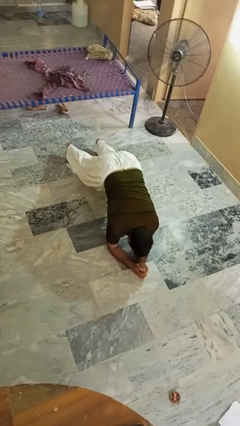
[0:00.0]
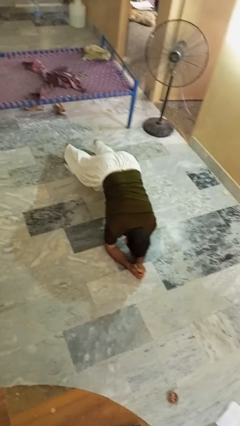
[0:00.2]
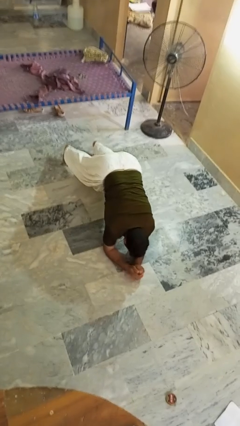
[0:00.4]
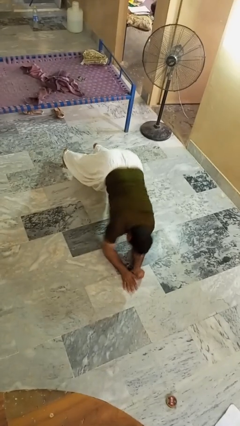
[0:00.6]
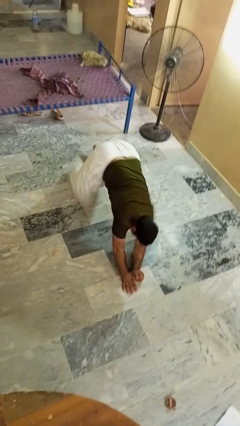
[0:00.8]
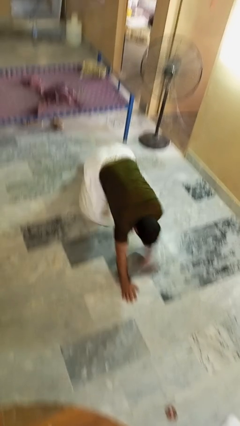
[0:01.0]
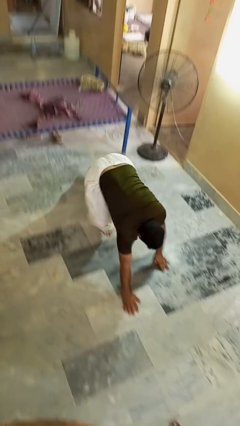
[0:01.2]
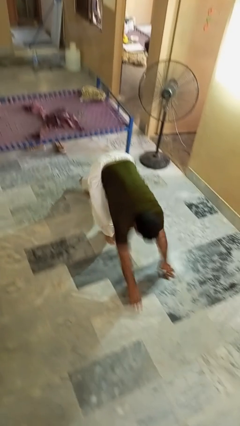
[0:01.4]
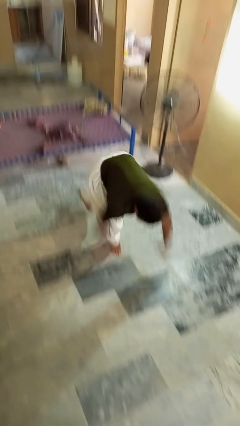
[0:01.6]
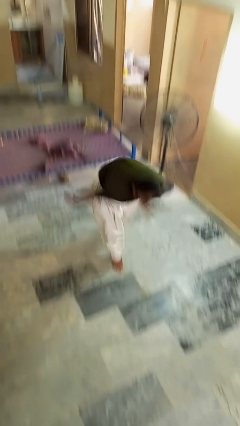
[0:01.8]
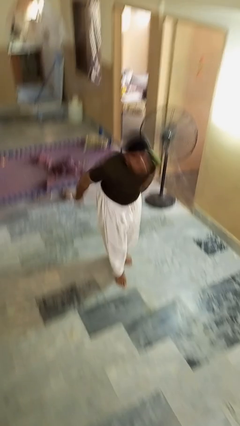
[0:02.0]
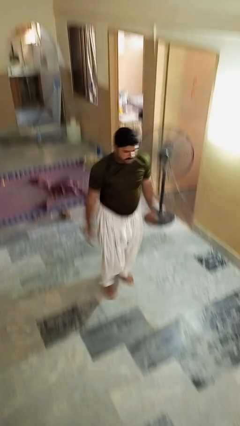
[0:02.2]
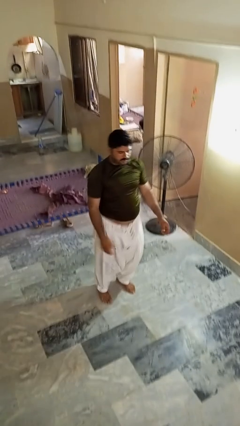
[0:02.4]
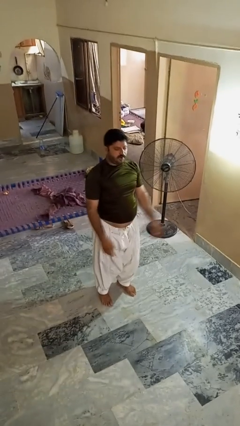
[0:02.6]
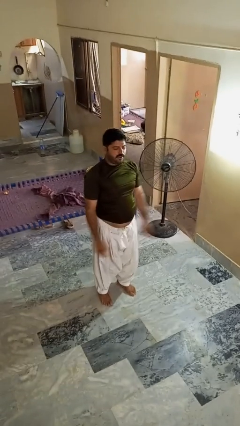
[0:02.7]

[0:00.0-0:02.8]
person stands up from floor

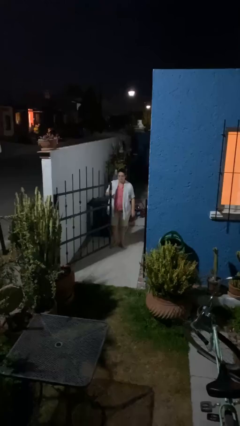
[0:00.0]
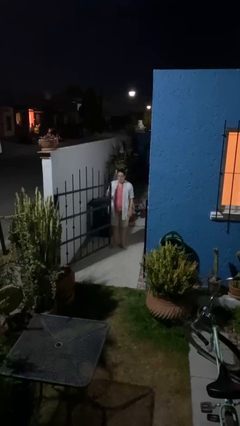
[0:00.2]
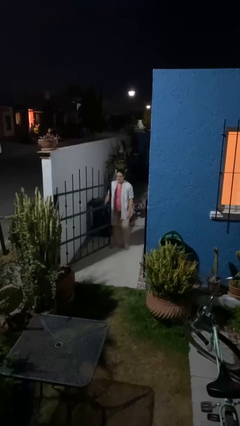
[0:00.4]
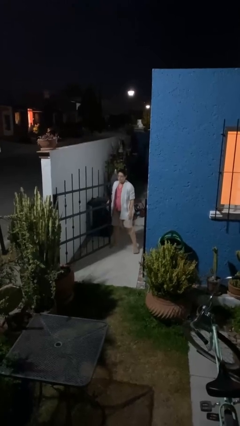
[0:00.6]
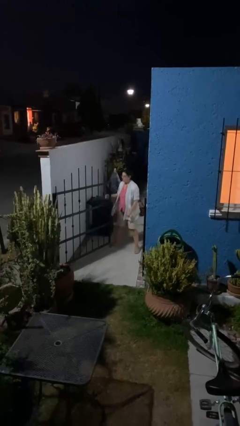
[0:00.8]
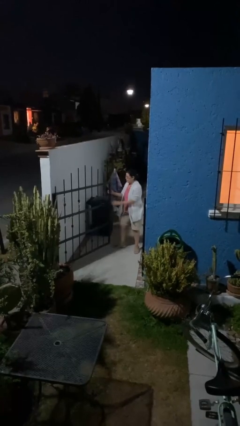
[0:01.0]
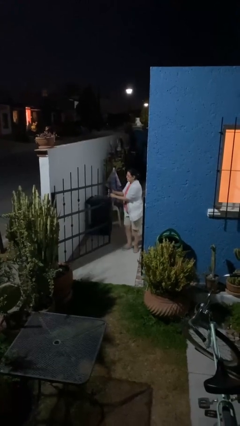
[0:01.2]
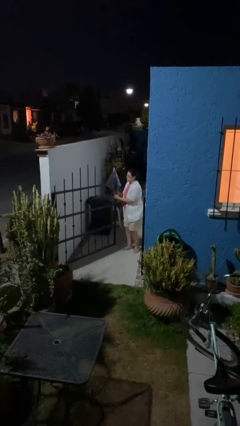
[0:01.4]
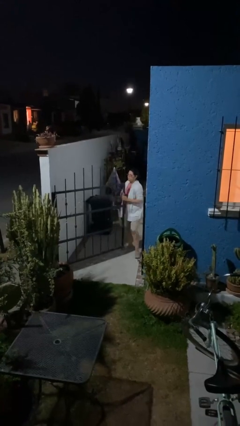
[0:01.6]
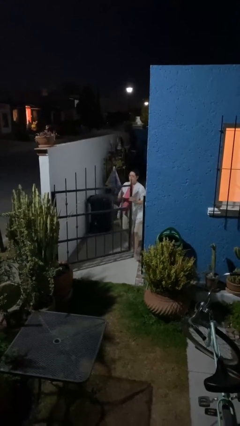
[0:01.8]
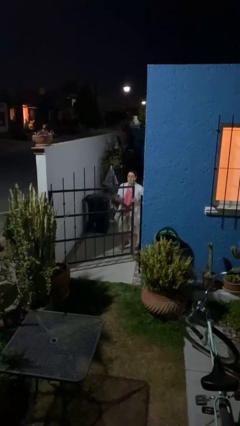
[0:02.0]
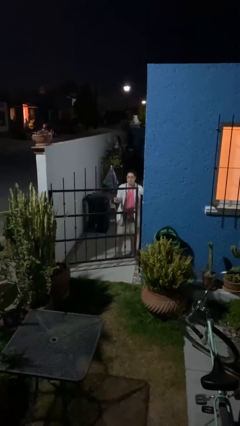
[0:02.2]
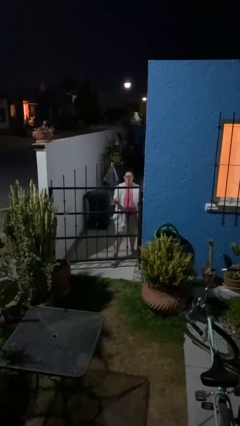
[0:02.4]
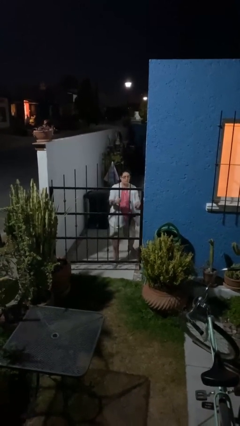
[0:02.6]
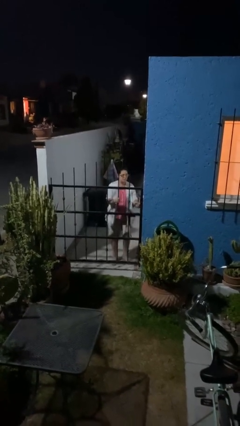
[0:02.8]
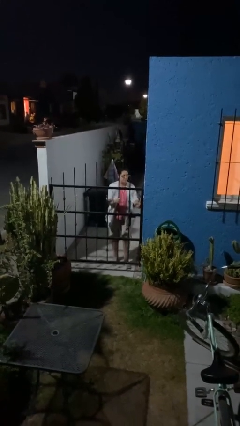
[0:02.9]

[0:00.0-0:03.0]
person closes facility door

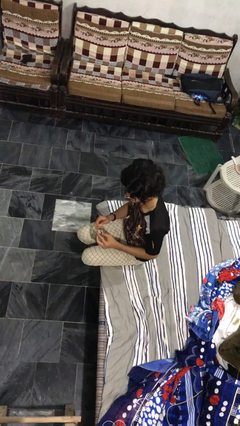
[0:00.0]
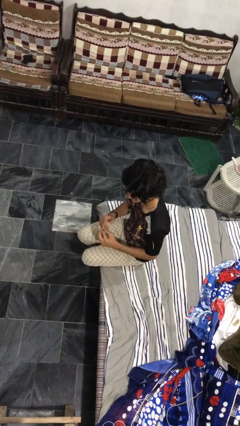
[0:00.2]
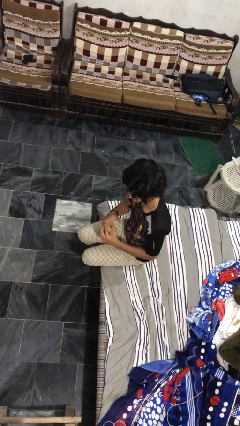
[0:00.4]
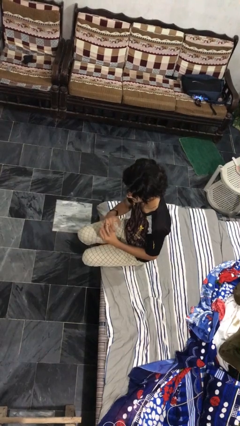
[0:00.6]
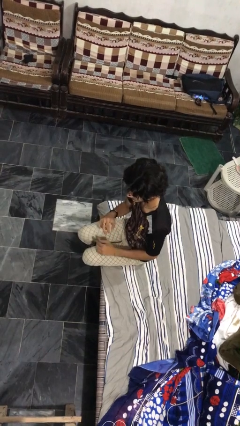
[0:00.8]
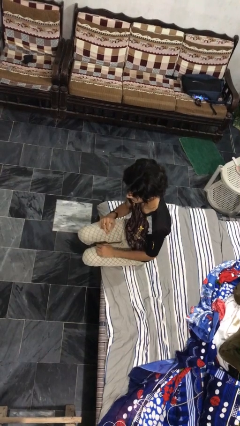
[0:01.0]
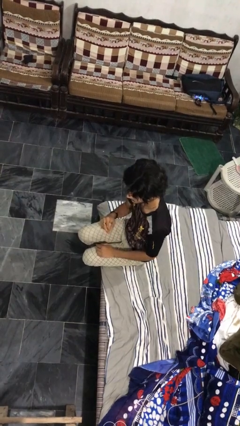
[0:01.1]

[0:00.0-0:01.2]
person puts on ring

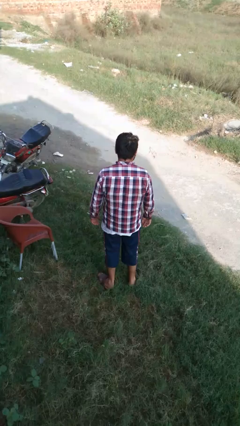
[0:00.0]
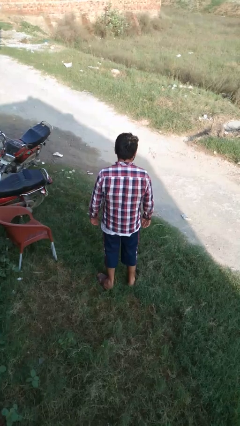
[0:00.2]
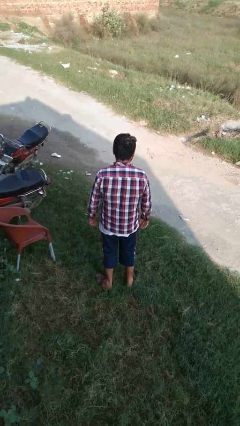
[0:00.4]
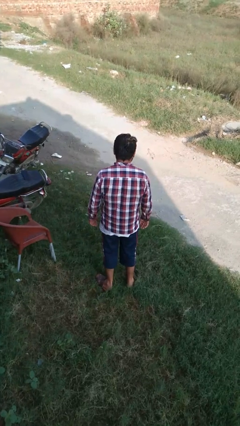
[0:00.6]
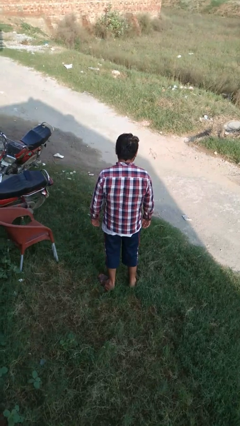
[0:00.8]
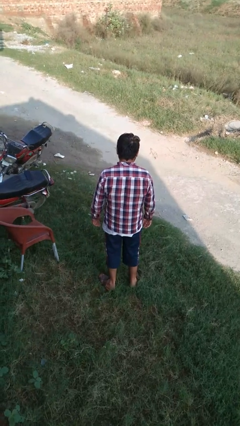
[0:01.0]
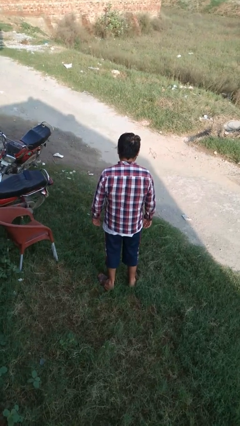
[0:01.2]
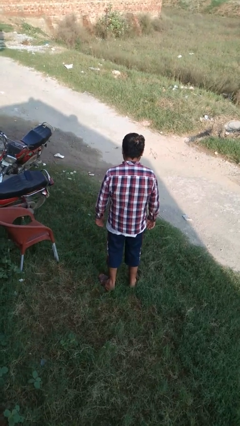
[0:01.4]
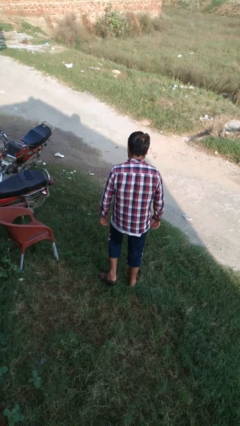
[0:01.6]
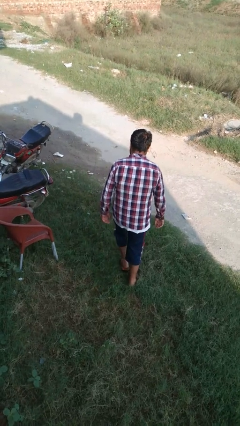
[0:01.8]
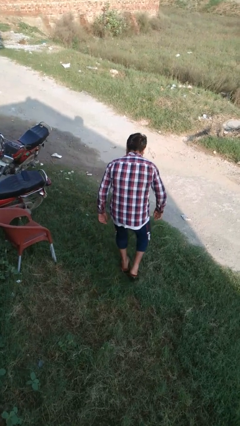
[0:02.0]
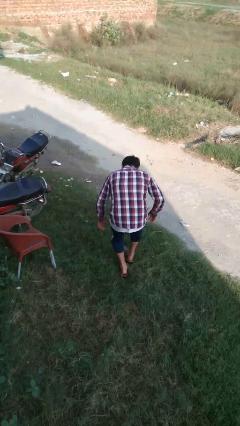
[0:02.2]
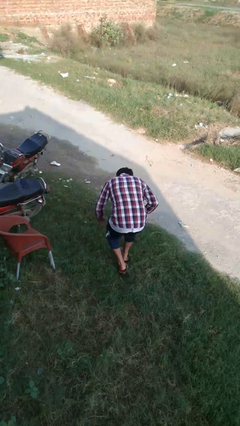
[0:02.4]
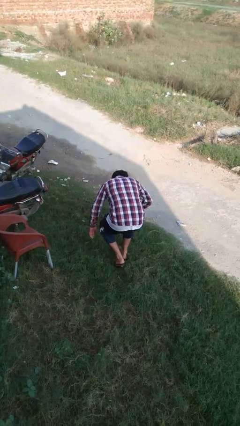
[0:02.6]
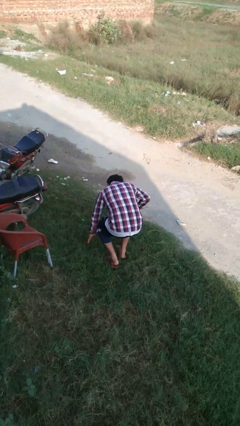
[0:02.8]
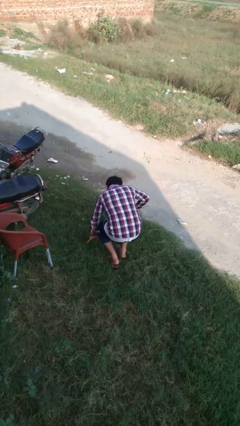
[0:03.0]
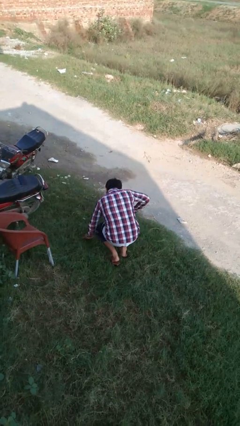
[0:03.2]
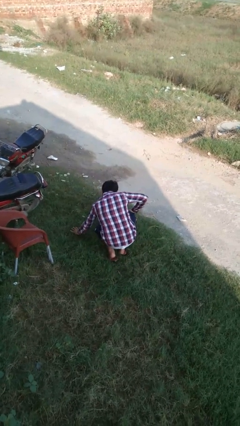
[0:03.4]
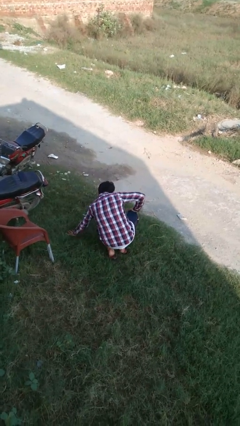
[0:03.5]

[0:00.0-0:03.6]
person trips on object on floor

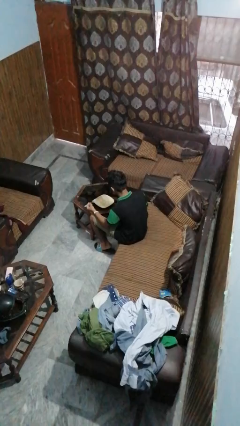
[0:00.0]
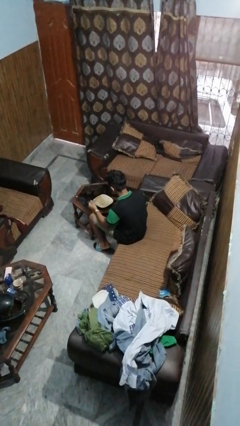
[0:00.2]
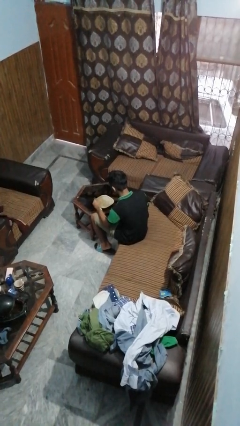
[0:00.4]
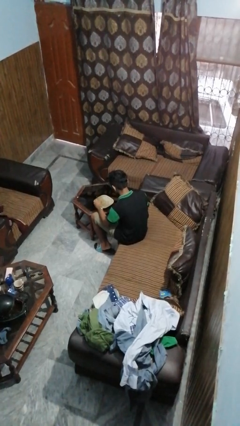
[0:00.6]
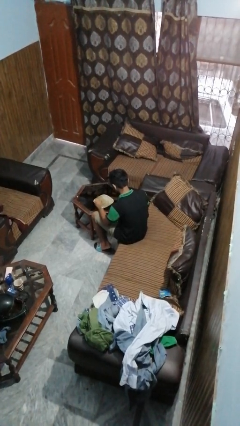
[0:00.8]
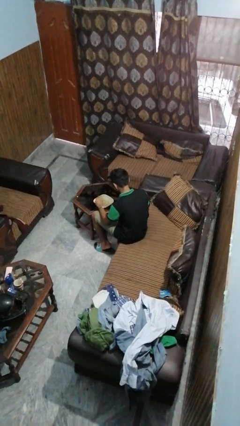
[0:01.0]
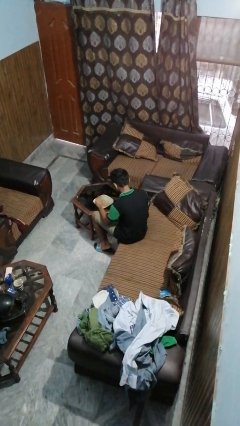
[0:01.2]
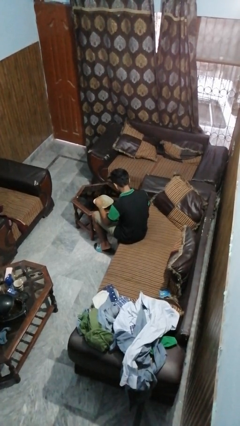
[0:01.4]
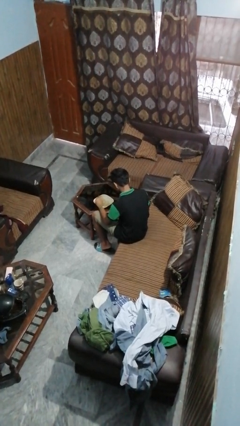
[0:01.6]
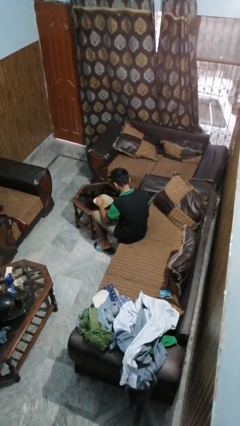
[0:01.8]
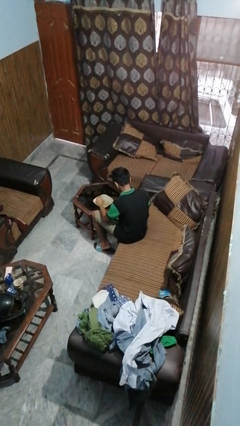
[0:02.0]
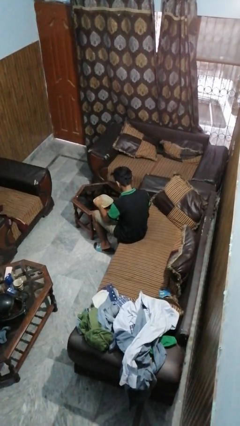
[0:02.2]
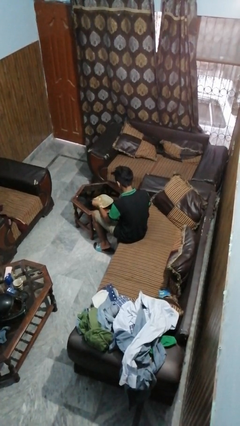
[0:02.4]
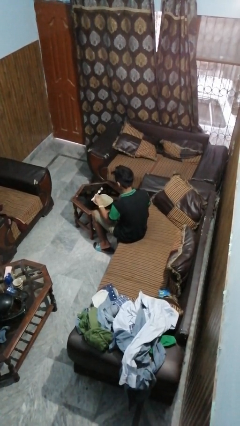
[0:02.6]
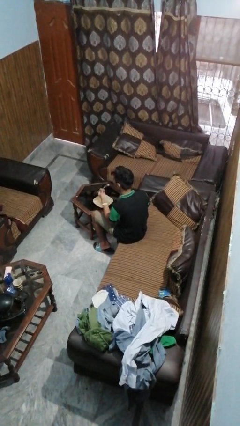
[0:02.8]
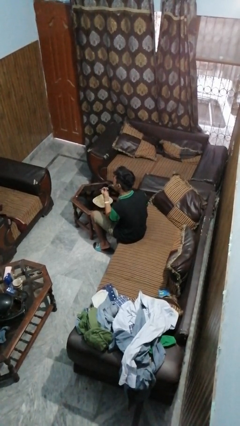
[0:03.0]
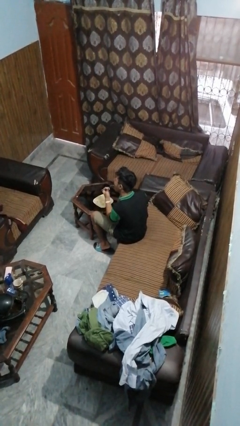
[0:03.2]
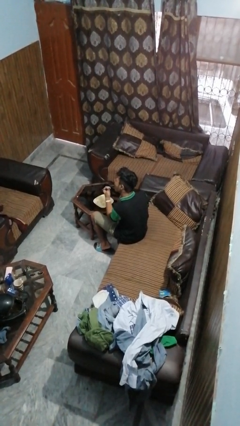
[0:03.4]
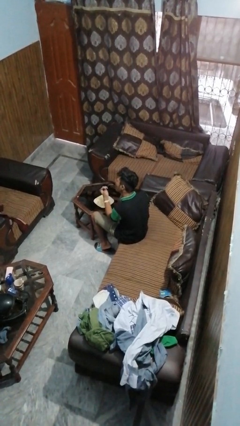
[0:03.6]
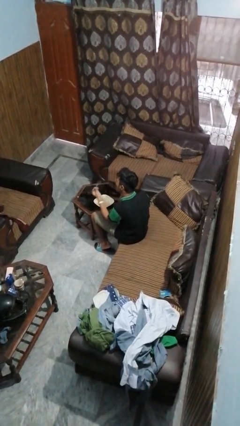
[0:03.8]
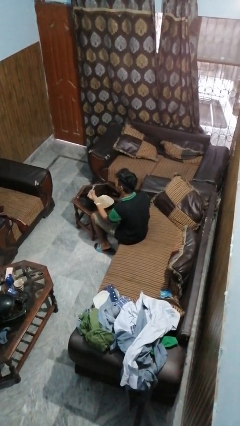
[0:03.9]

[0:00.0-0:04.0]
person eats with utensil

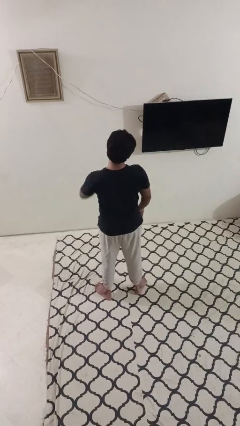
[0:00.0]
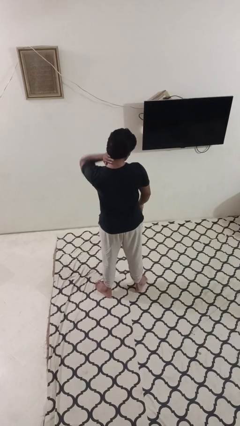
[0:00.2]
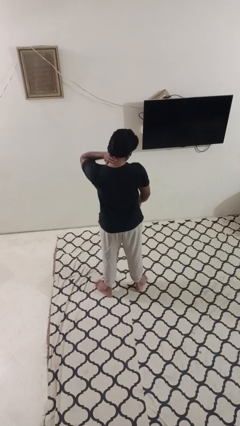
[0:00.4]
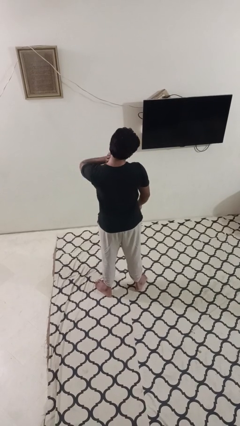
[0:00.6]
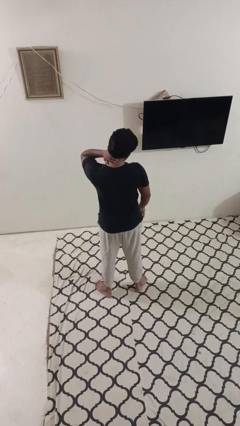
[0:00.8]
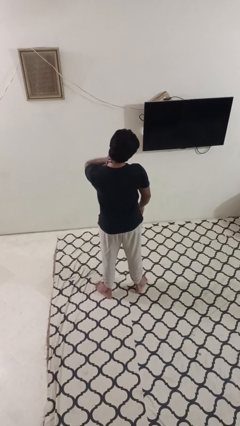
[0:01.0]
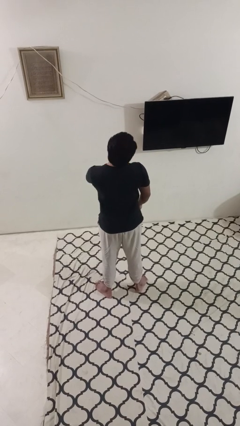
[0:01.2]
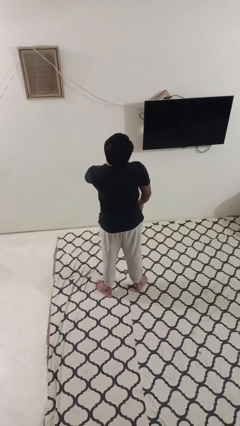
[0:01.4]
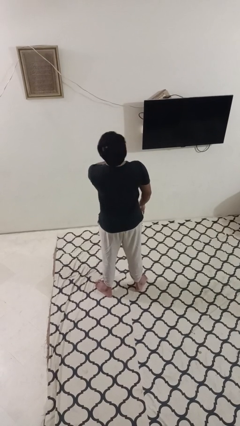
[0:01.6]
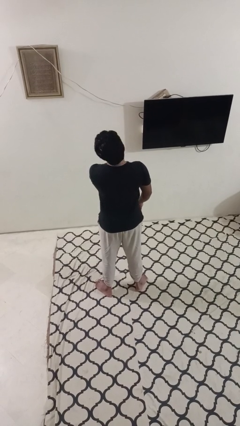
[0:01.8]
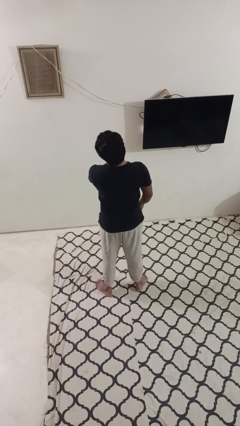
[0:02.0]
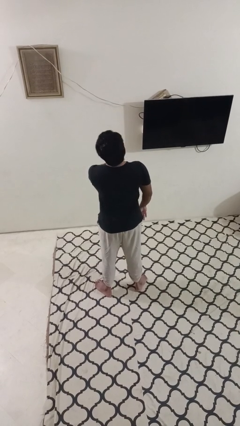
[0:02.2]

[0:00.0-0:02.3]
person rubs neck

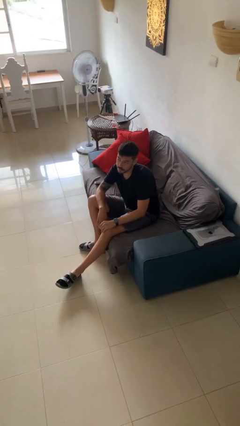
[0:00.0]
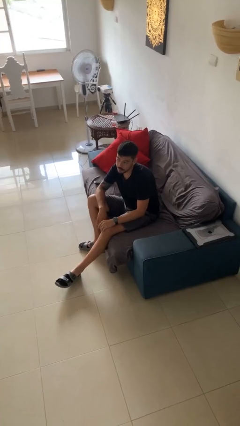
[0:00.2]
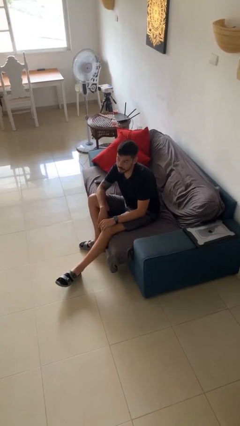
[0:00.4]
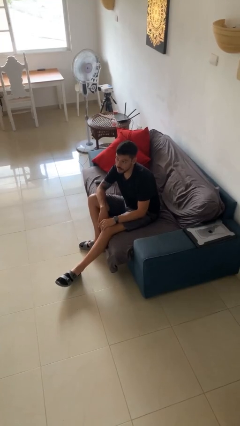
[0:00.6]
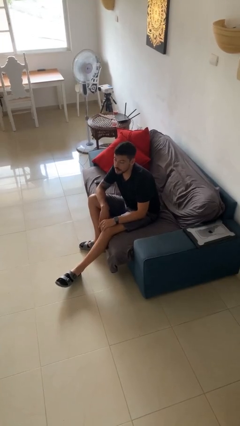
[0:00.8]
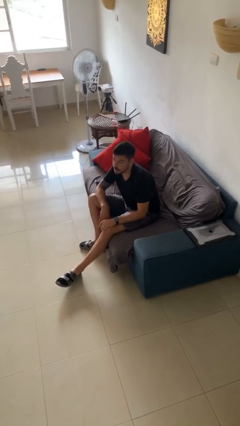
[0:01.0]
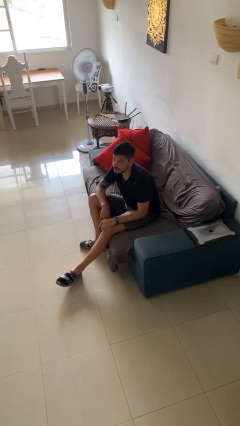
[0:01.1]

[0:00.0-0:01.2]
person gestures lower hand
